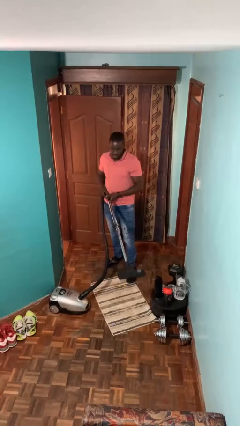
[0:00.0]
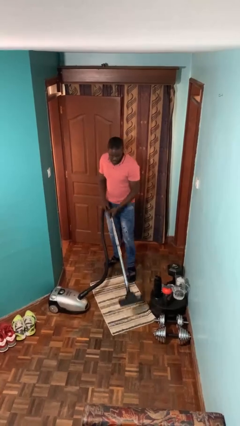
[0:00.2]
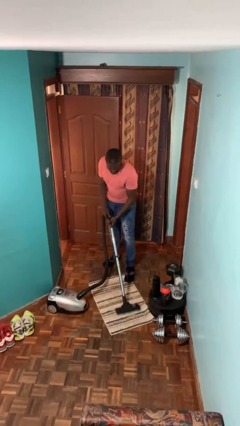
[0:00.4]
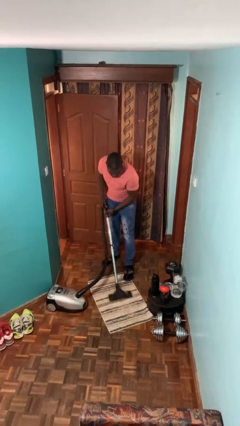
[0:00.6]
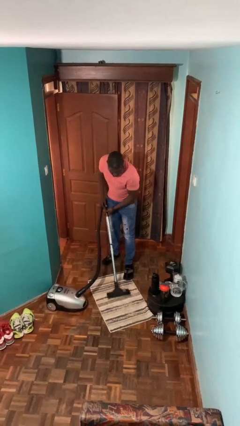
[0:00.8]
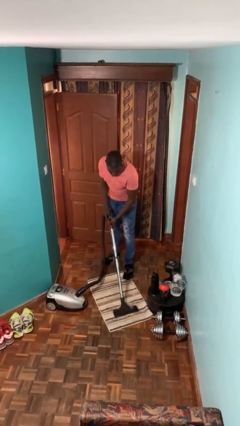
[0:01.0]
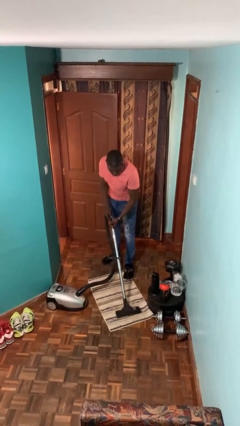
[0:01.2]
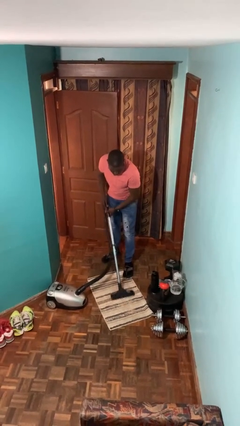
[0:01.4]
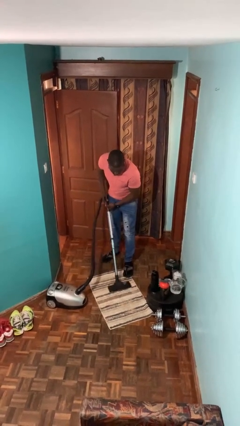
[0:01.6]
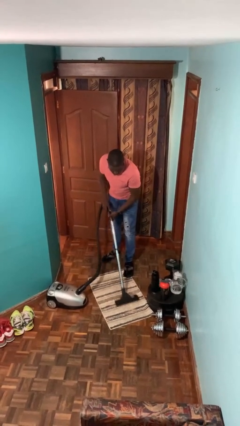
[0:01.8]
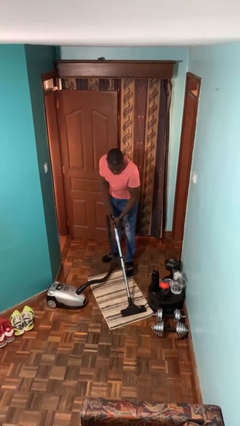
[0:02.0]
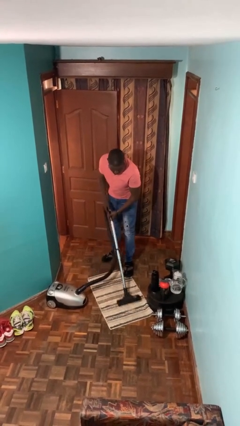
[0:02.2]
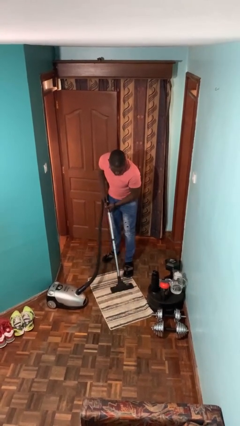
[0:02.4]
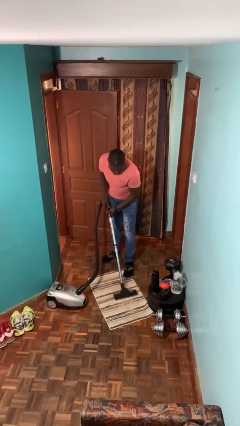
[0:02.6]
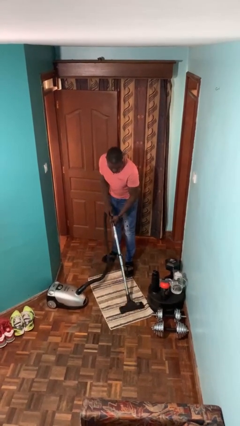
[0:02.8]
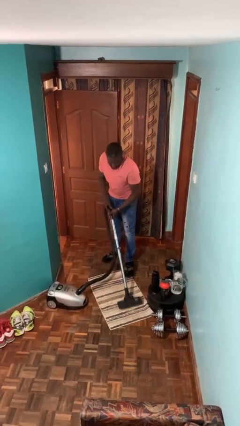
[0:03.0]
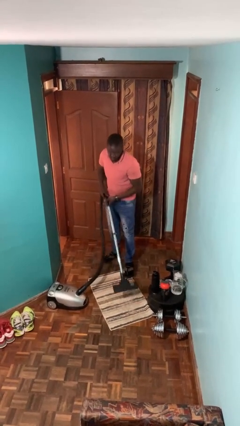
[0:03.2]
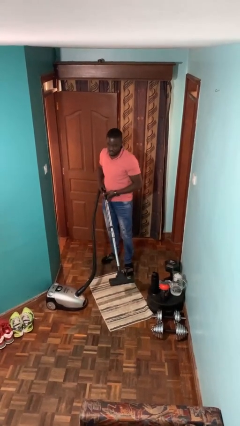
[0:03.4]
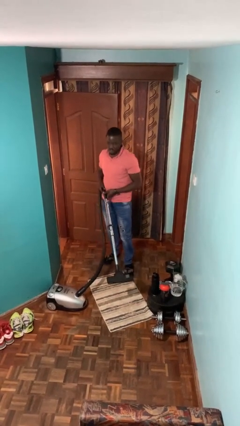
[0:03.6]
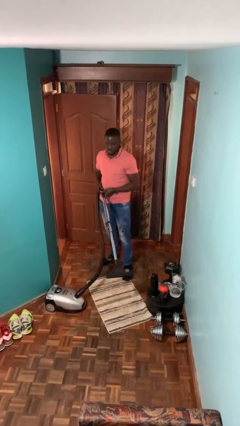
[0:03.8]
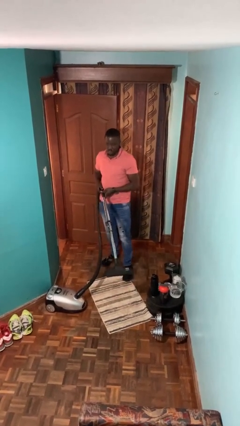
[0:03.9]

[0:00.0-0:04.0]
person vacuums carpet

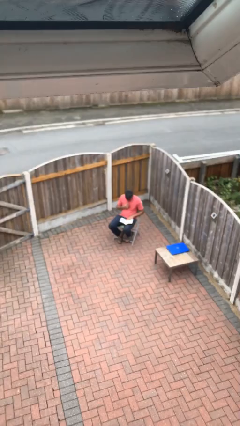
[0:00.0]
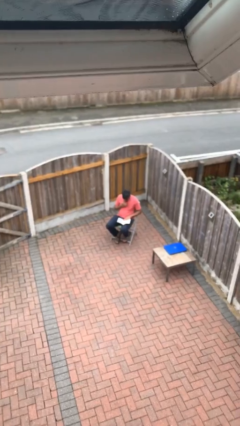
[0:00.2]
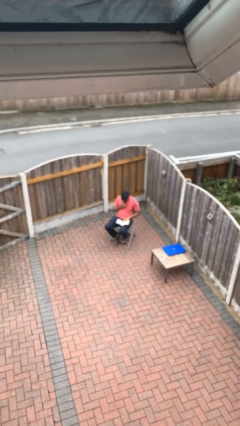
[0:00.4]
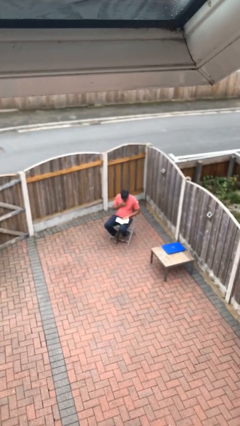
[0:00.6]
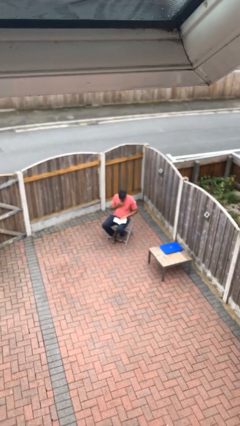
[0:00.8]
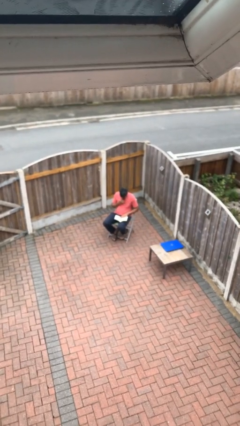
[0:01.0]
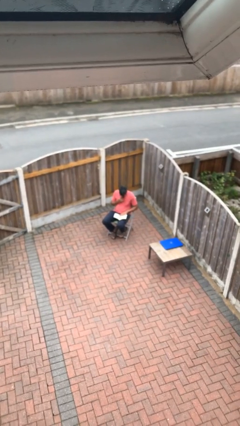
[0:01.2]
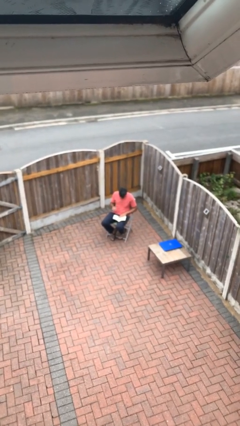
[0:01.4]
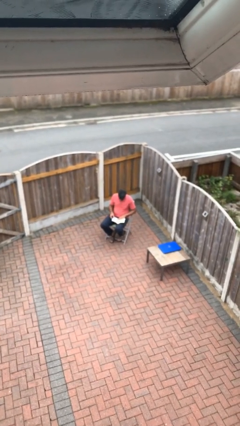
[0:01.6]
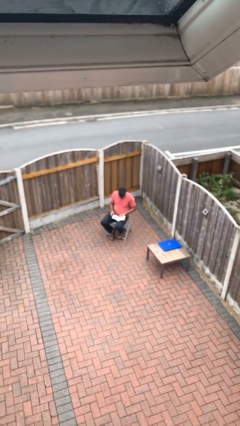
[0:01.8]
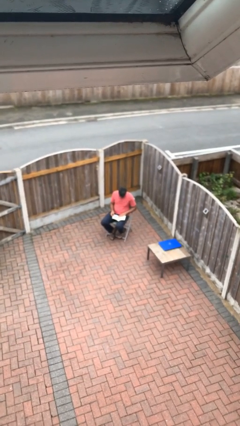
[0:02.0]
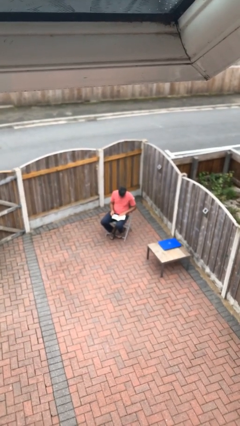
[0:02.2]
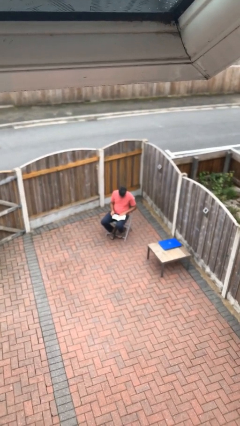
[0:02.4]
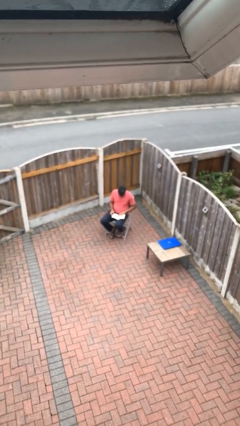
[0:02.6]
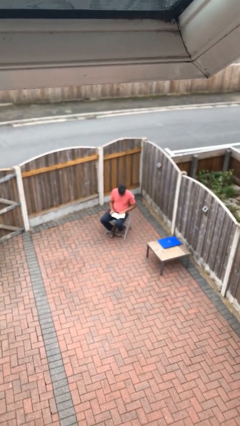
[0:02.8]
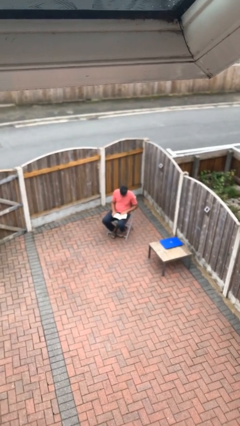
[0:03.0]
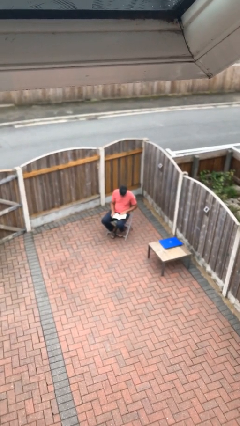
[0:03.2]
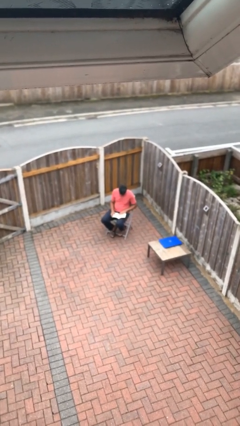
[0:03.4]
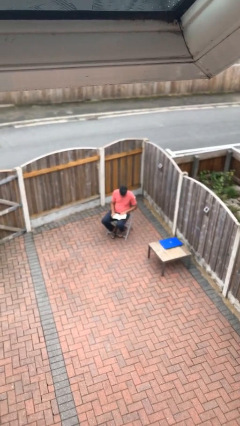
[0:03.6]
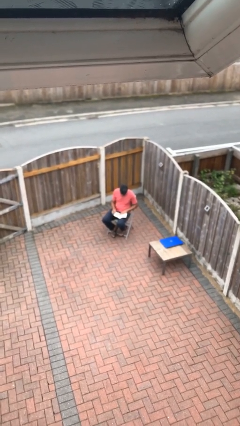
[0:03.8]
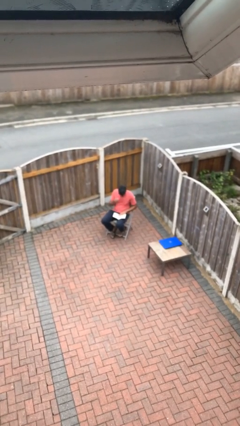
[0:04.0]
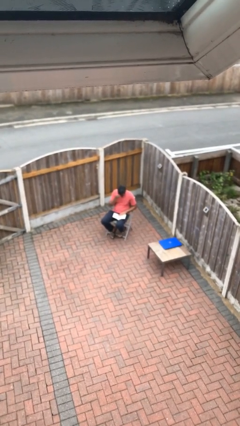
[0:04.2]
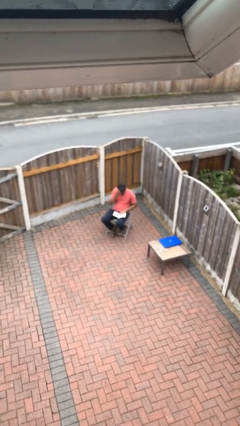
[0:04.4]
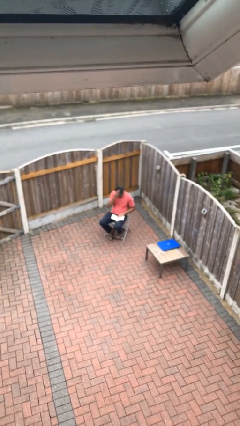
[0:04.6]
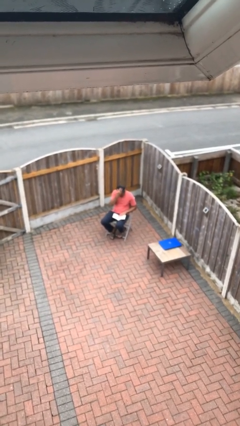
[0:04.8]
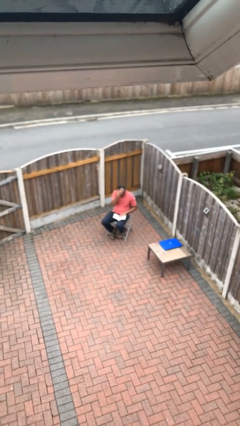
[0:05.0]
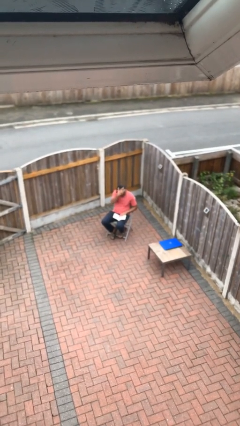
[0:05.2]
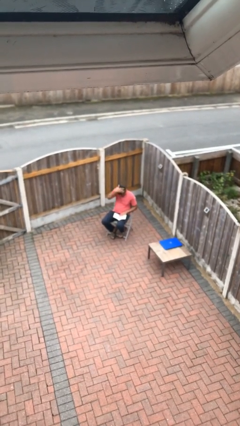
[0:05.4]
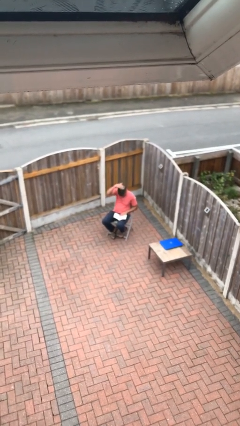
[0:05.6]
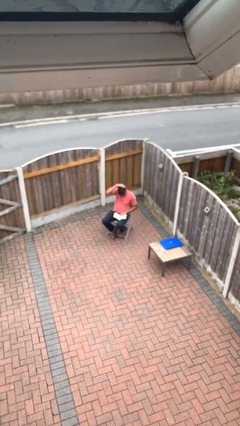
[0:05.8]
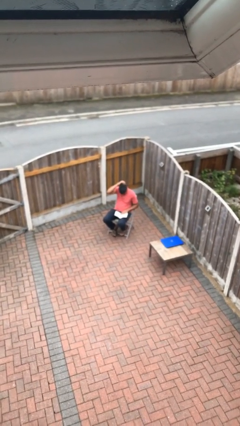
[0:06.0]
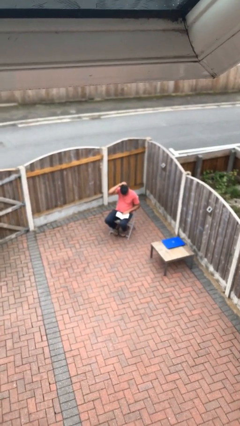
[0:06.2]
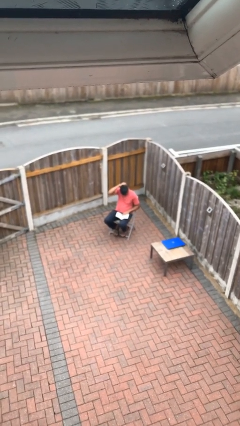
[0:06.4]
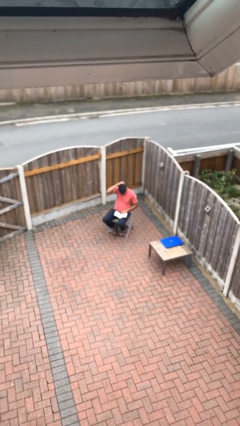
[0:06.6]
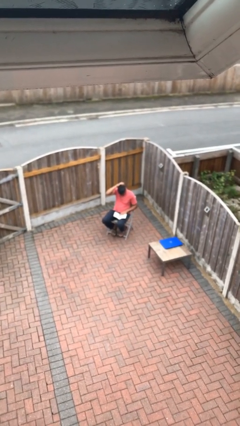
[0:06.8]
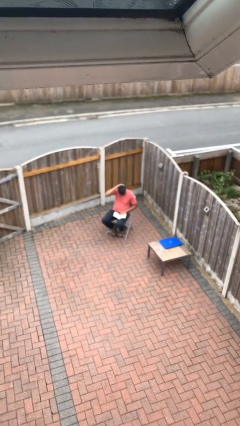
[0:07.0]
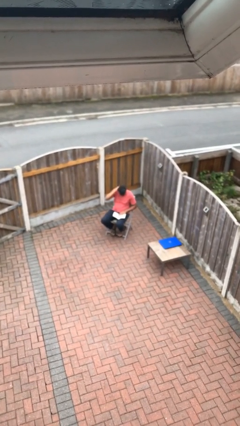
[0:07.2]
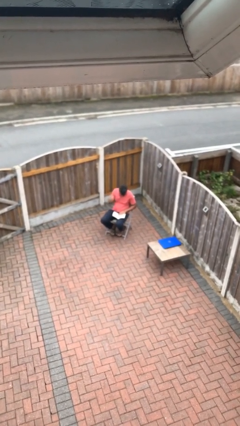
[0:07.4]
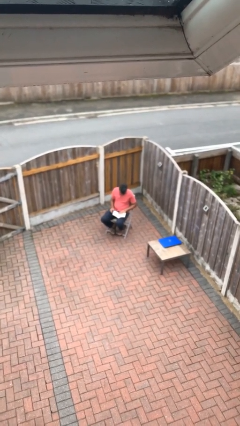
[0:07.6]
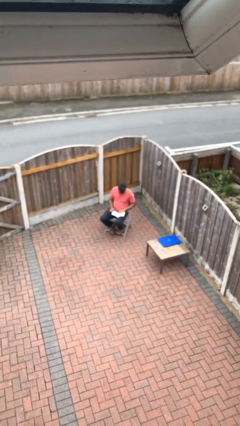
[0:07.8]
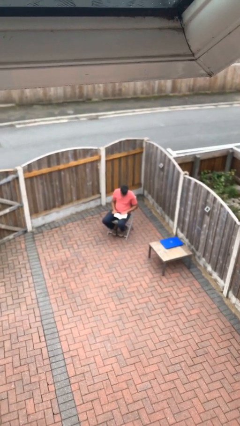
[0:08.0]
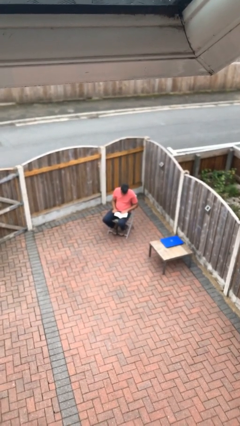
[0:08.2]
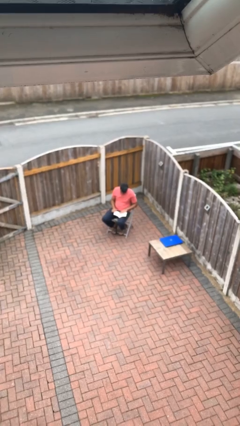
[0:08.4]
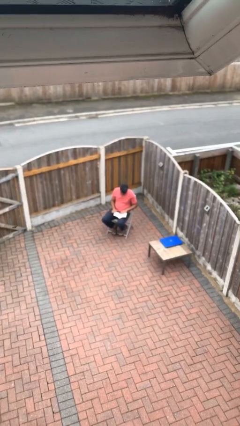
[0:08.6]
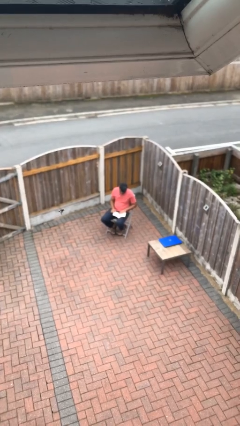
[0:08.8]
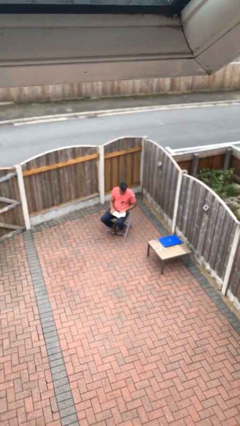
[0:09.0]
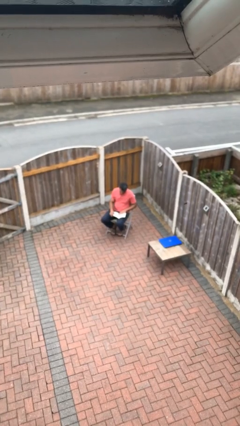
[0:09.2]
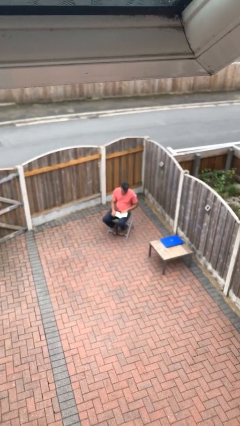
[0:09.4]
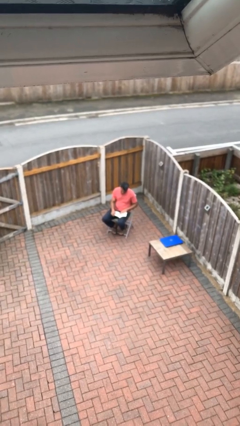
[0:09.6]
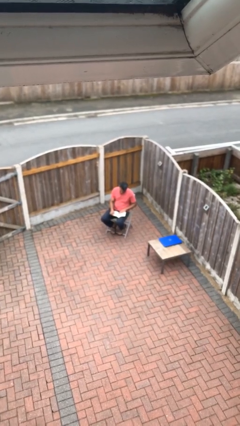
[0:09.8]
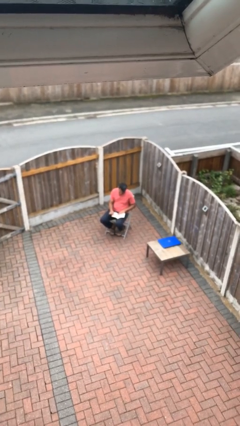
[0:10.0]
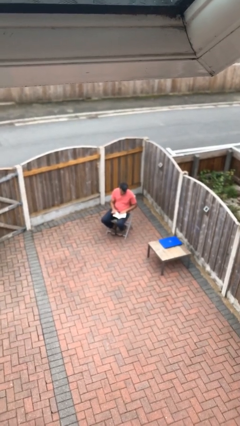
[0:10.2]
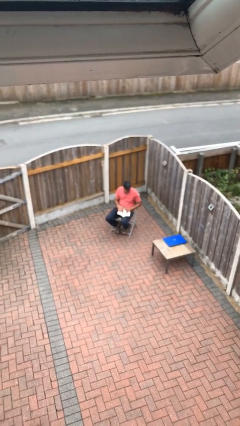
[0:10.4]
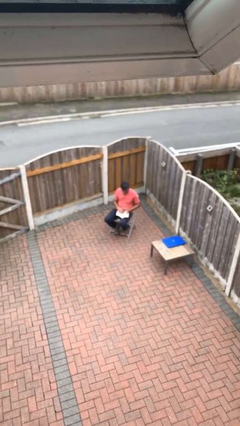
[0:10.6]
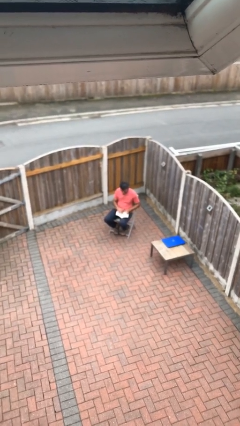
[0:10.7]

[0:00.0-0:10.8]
person reads document

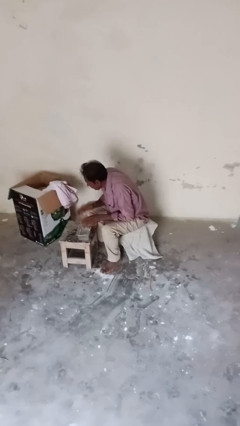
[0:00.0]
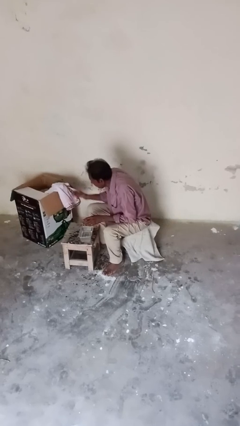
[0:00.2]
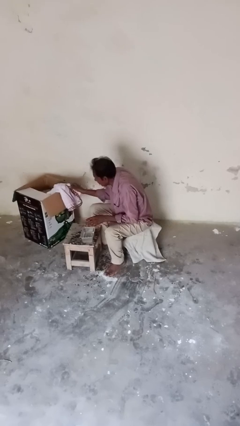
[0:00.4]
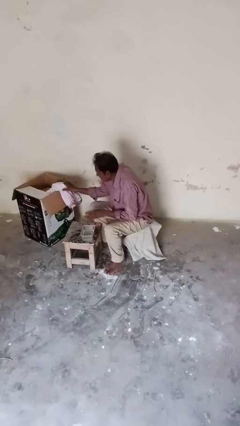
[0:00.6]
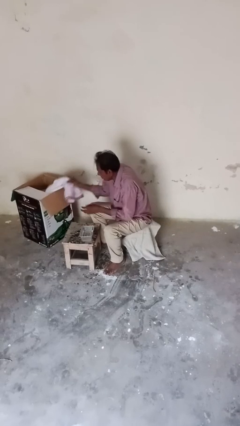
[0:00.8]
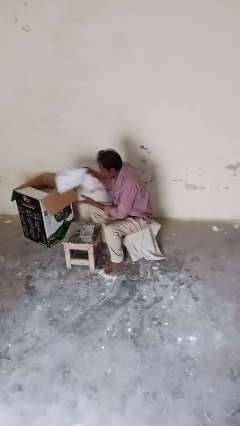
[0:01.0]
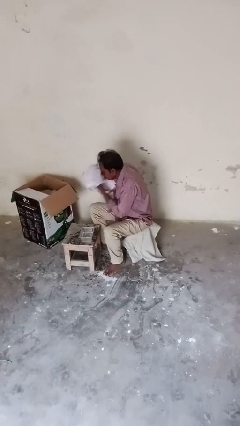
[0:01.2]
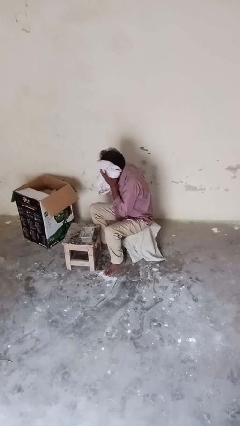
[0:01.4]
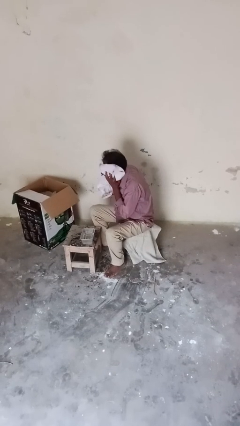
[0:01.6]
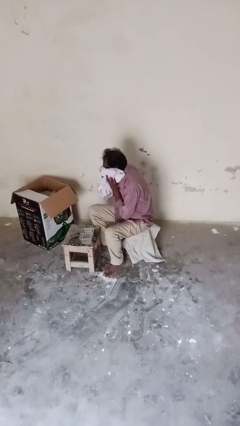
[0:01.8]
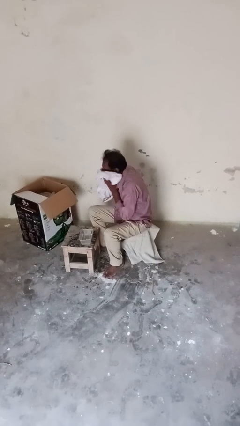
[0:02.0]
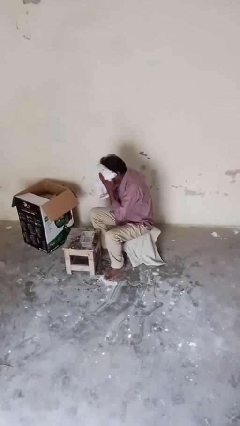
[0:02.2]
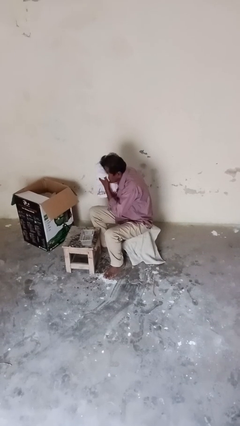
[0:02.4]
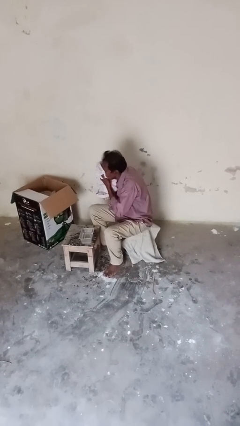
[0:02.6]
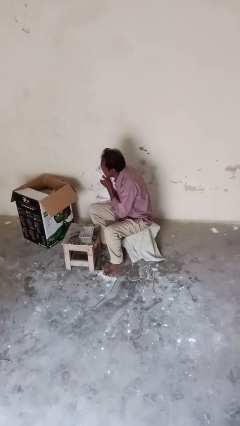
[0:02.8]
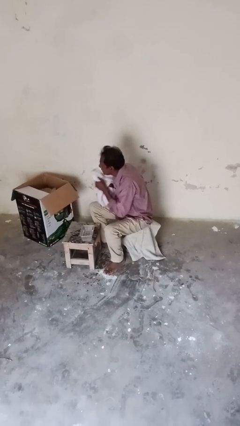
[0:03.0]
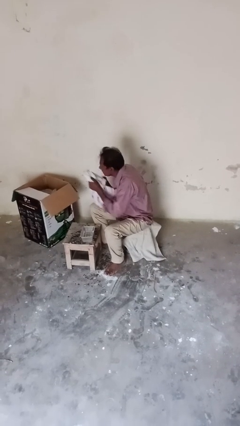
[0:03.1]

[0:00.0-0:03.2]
person dries face with towel
